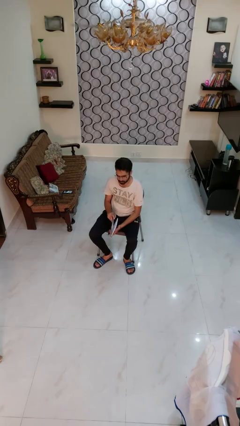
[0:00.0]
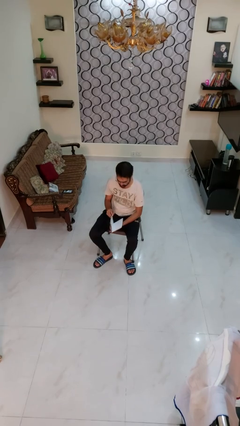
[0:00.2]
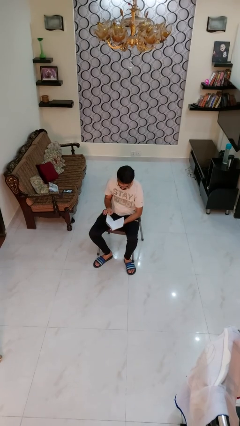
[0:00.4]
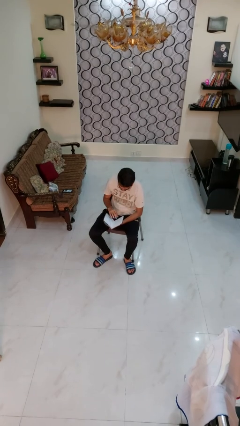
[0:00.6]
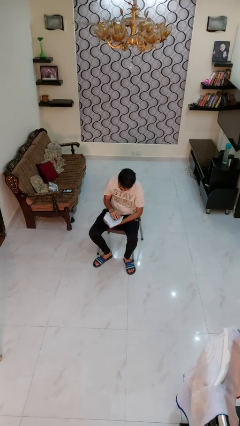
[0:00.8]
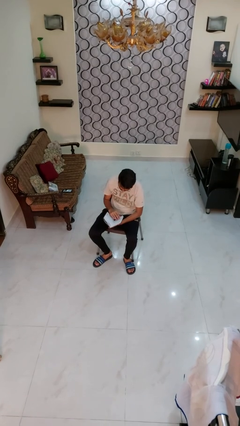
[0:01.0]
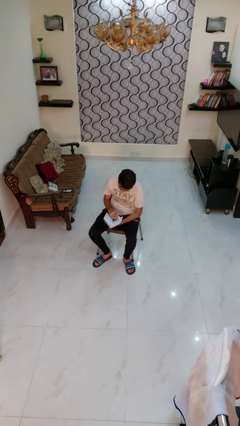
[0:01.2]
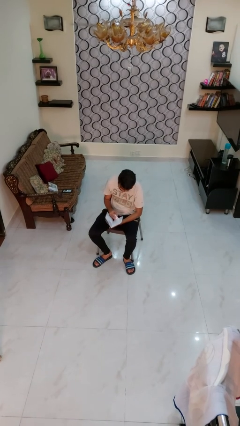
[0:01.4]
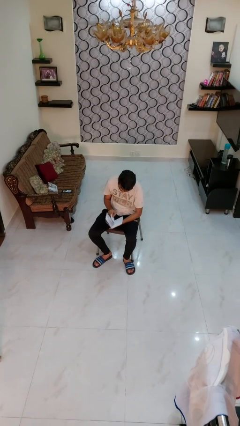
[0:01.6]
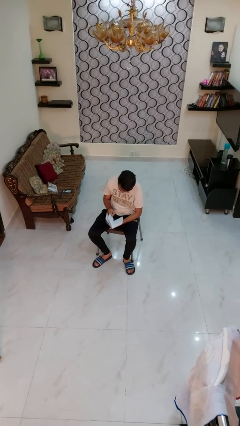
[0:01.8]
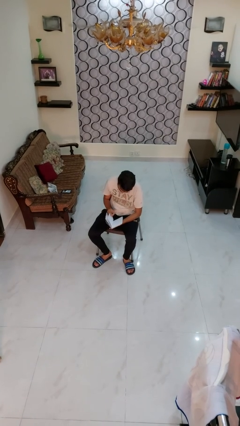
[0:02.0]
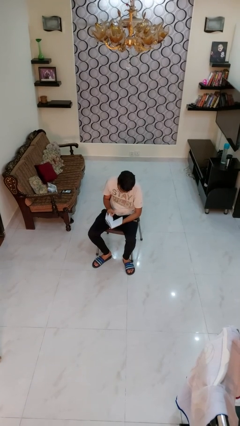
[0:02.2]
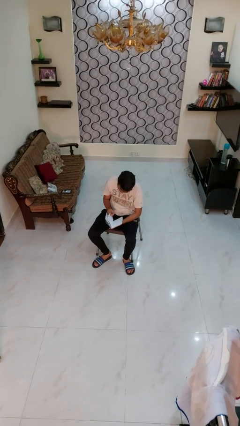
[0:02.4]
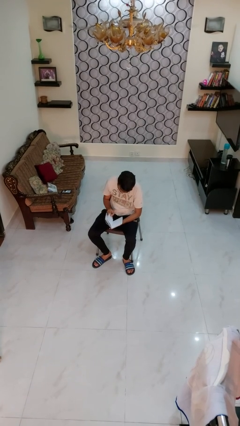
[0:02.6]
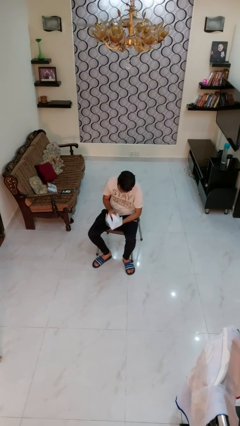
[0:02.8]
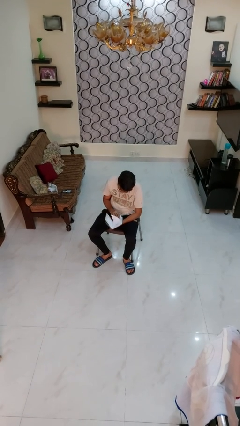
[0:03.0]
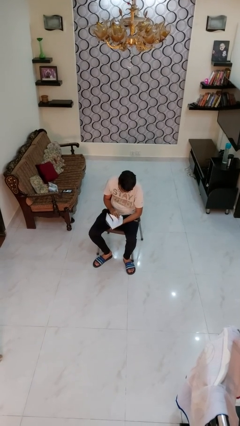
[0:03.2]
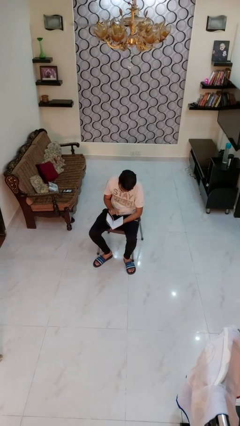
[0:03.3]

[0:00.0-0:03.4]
person reads book

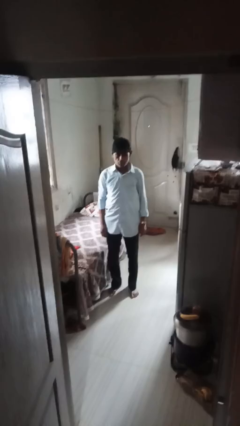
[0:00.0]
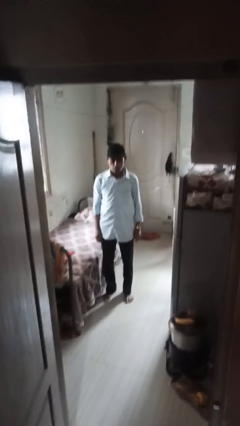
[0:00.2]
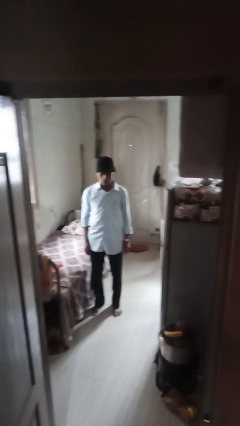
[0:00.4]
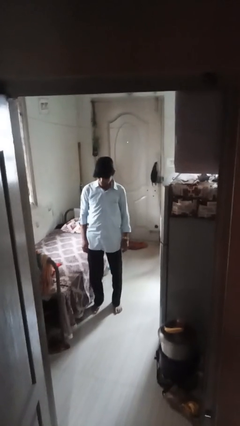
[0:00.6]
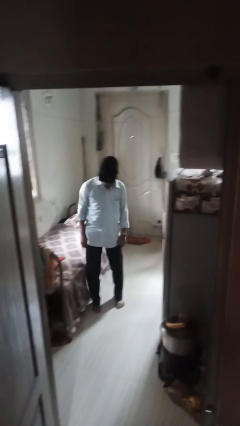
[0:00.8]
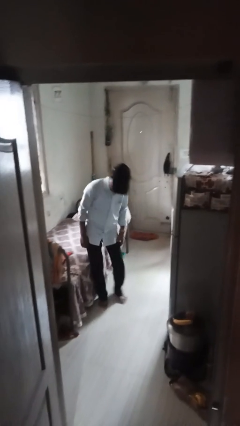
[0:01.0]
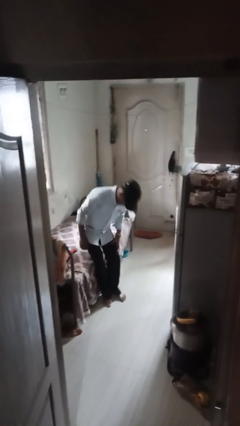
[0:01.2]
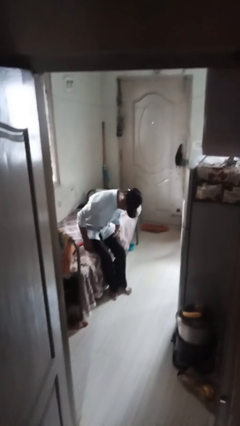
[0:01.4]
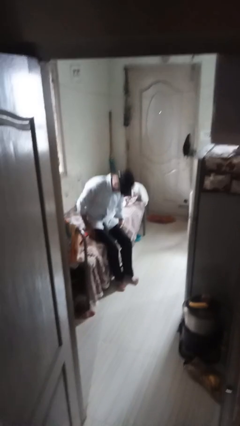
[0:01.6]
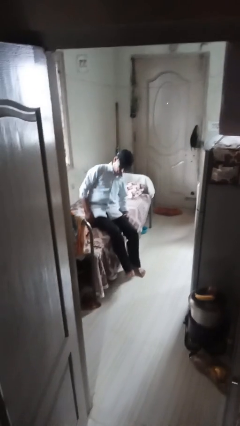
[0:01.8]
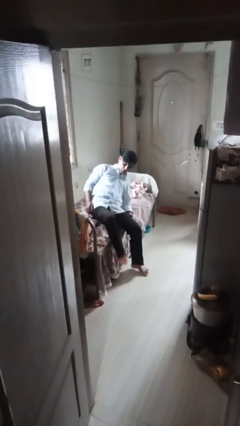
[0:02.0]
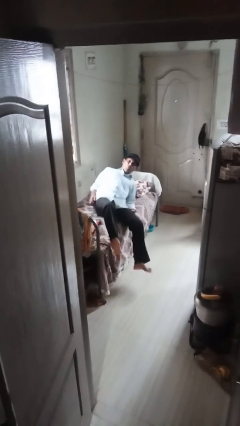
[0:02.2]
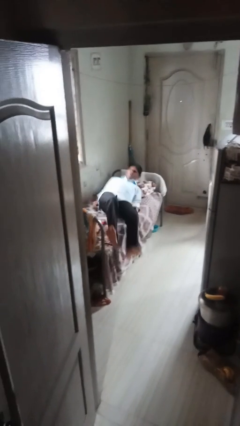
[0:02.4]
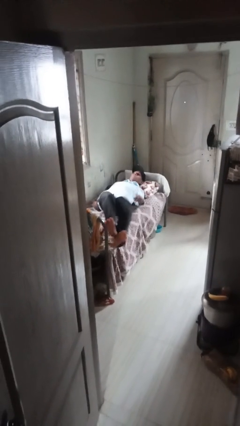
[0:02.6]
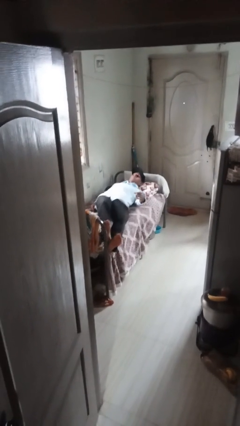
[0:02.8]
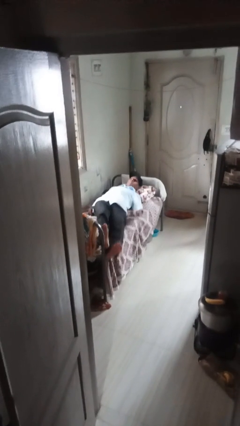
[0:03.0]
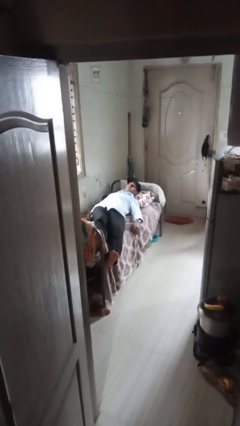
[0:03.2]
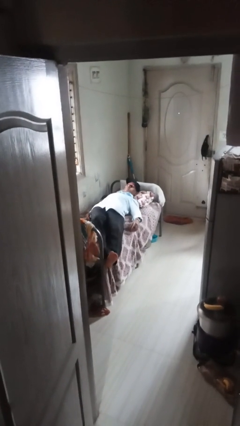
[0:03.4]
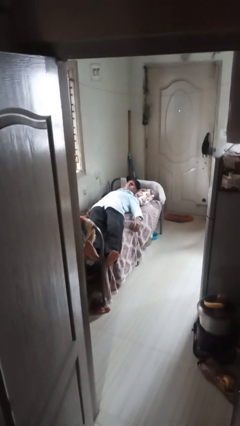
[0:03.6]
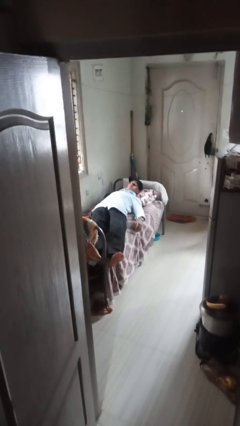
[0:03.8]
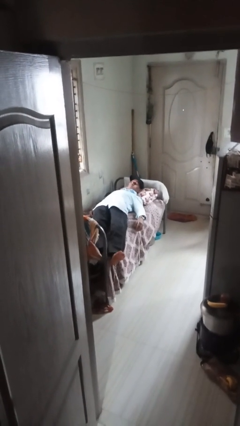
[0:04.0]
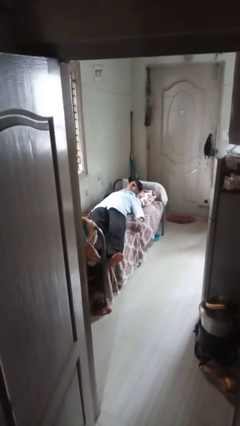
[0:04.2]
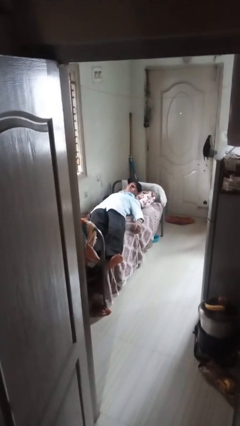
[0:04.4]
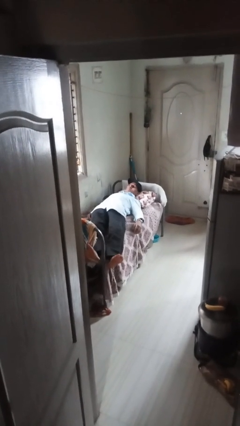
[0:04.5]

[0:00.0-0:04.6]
person lies down on bed

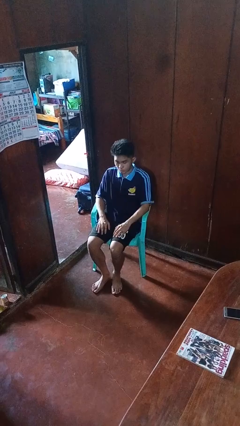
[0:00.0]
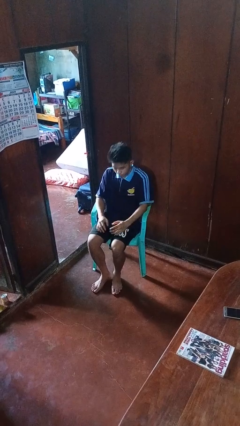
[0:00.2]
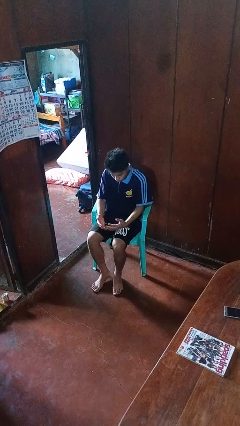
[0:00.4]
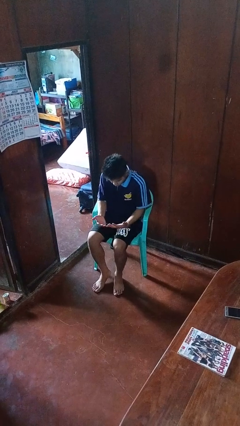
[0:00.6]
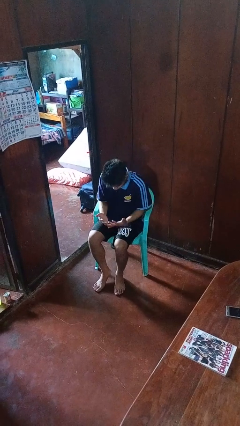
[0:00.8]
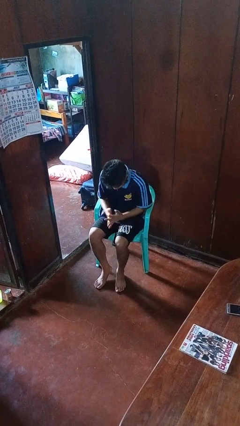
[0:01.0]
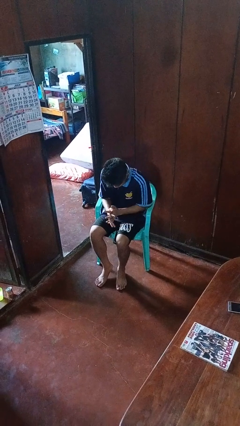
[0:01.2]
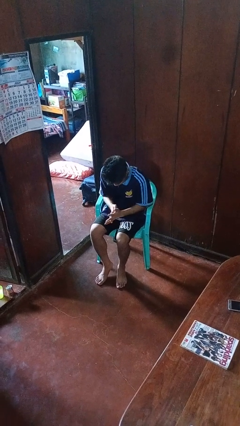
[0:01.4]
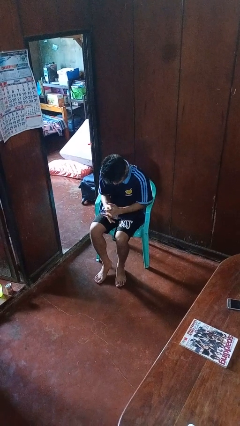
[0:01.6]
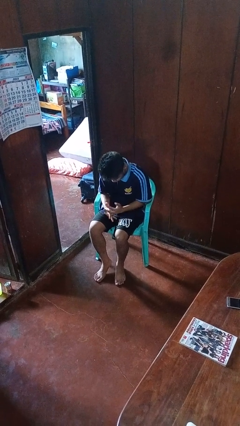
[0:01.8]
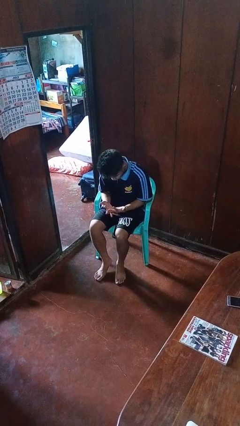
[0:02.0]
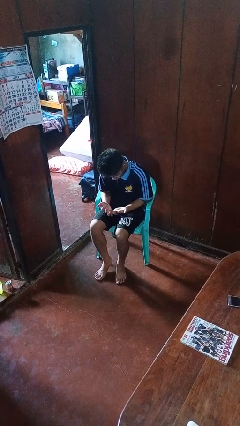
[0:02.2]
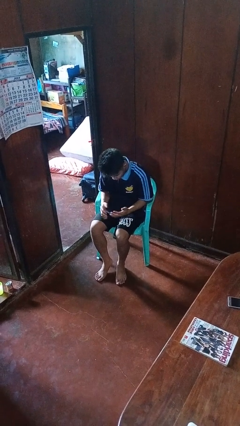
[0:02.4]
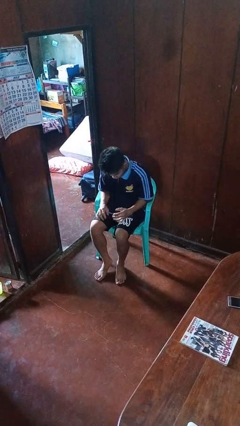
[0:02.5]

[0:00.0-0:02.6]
person looks at hands in lap

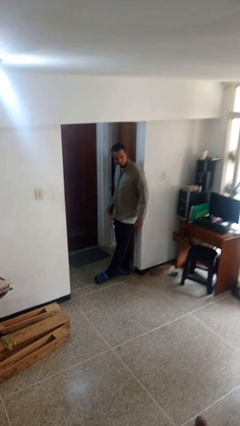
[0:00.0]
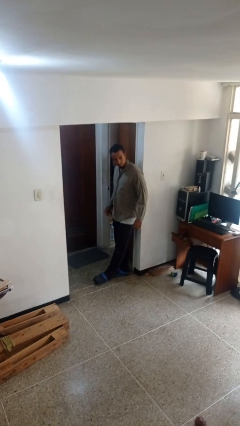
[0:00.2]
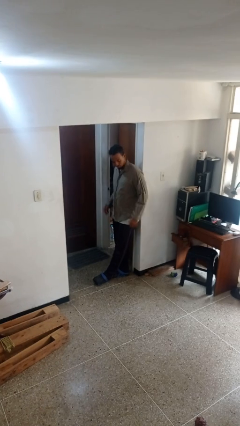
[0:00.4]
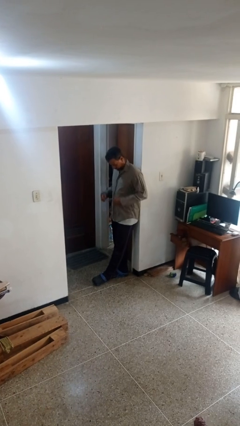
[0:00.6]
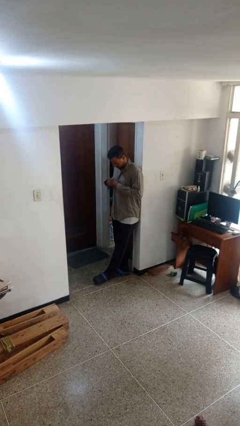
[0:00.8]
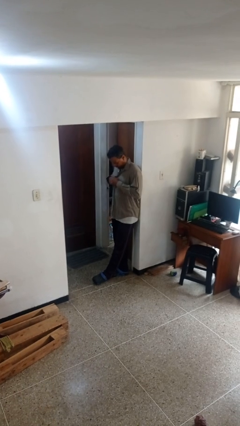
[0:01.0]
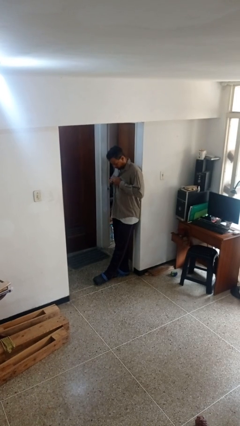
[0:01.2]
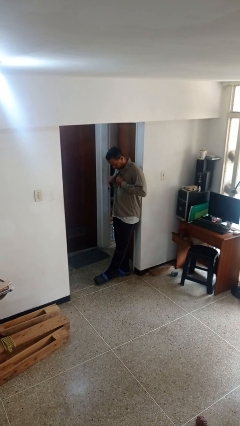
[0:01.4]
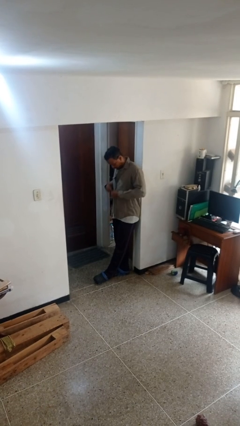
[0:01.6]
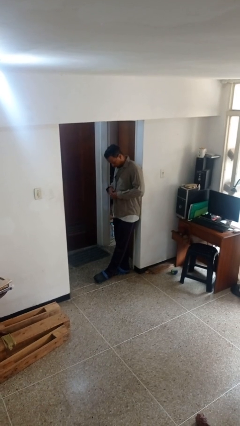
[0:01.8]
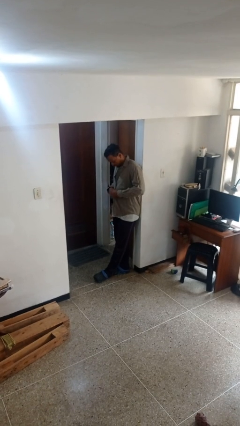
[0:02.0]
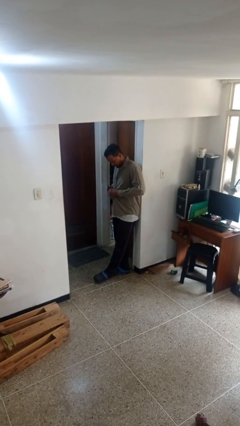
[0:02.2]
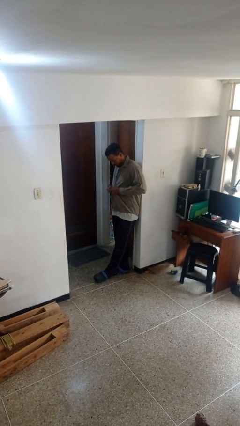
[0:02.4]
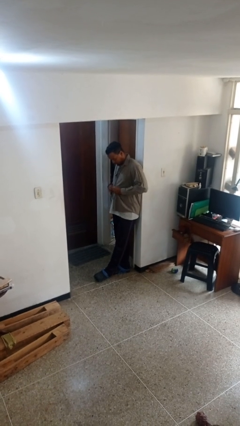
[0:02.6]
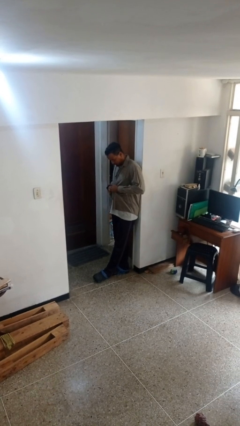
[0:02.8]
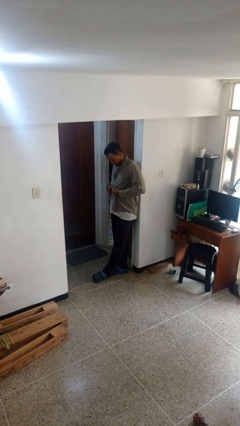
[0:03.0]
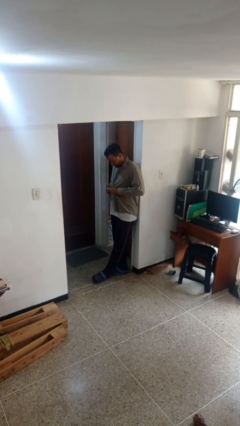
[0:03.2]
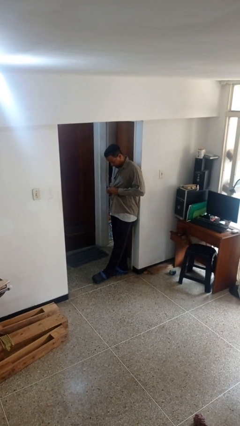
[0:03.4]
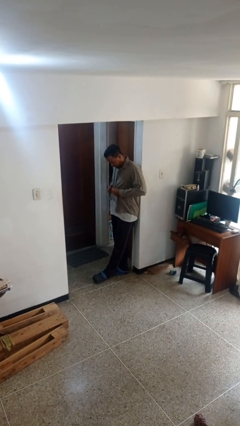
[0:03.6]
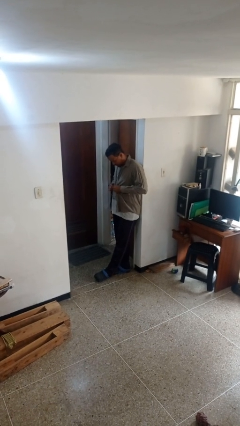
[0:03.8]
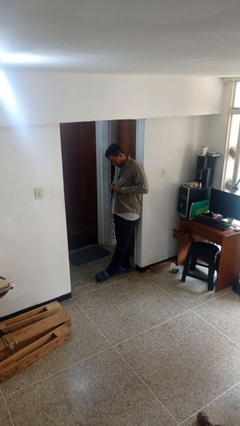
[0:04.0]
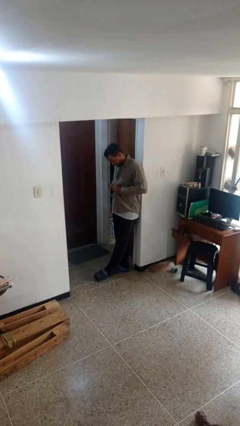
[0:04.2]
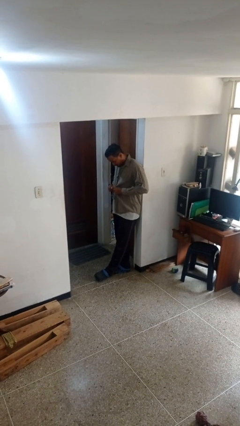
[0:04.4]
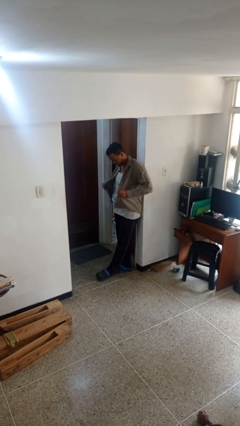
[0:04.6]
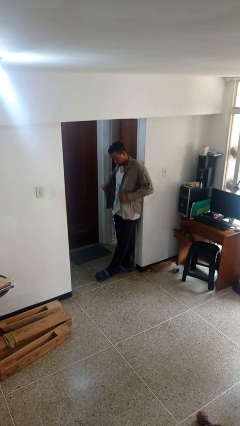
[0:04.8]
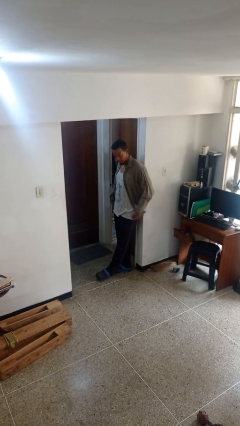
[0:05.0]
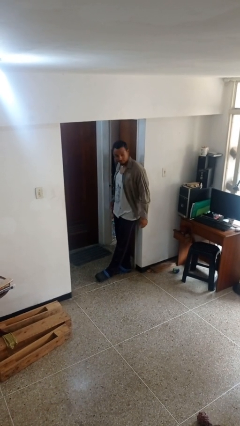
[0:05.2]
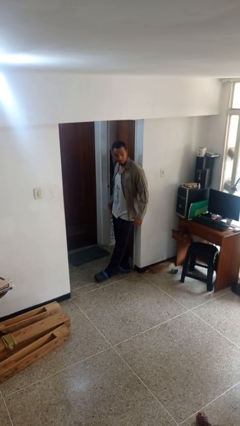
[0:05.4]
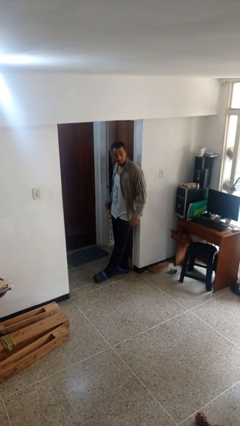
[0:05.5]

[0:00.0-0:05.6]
person unbuttons shirt

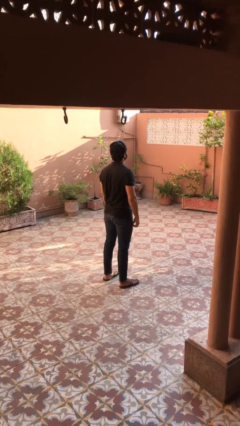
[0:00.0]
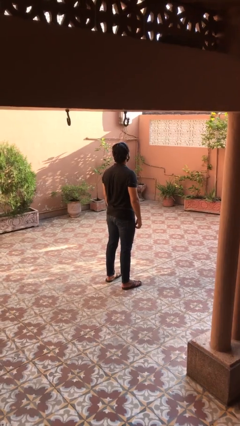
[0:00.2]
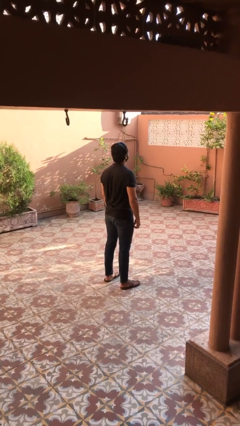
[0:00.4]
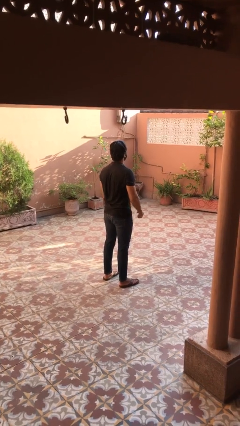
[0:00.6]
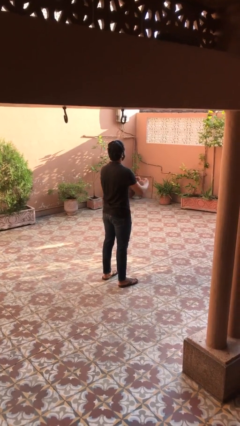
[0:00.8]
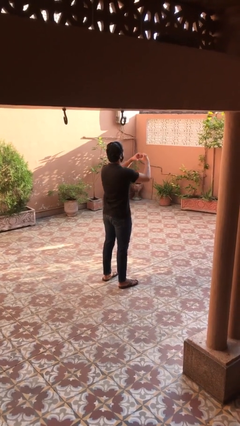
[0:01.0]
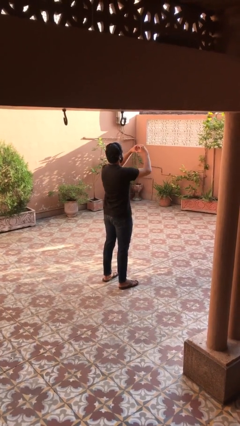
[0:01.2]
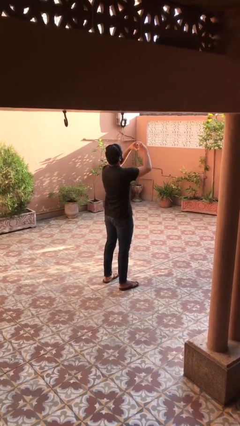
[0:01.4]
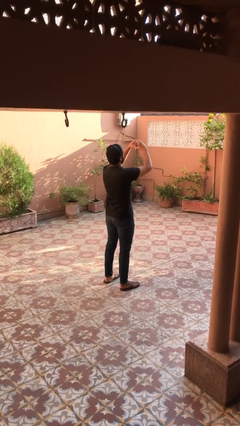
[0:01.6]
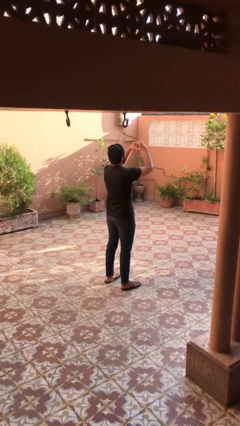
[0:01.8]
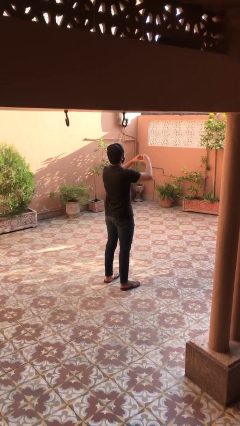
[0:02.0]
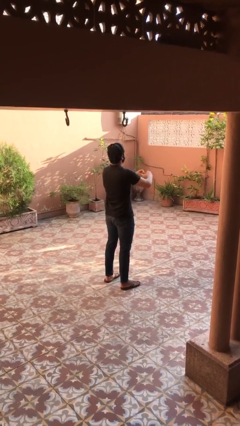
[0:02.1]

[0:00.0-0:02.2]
person gestures heart
